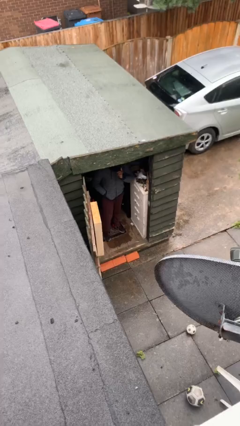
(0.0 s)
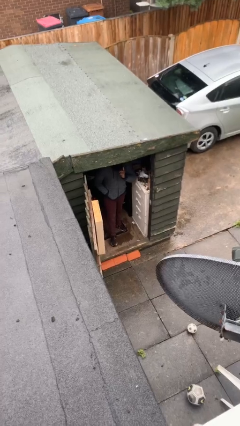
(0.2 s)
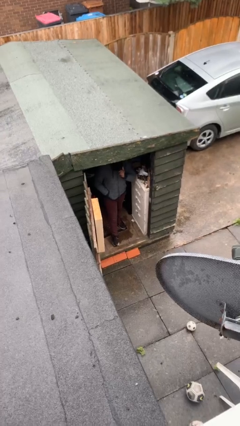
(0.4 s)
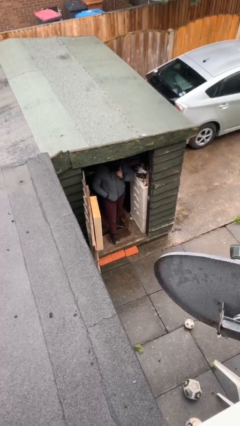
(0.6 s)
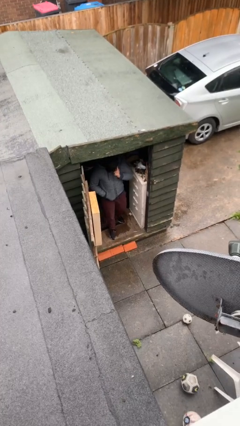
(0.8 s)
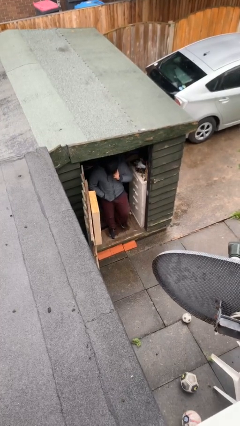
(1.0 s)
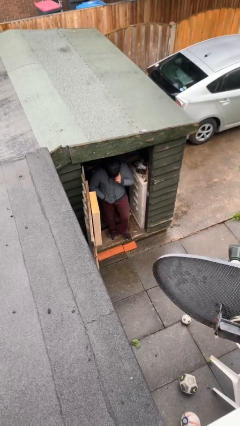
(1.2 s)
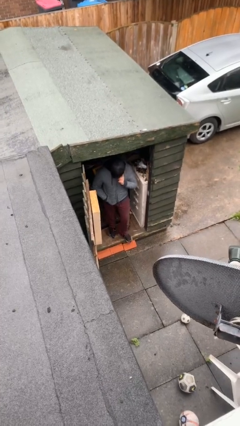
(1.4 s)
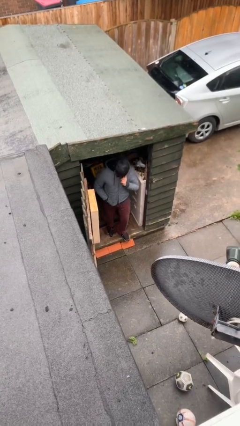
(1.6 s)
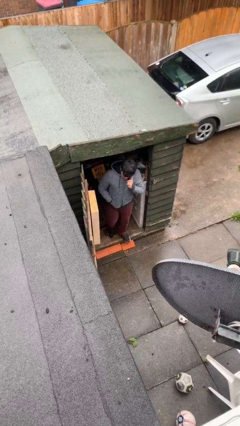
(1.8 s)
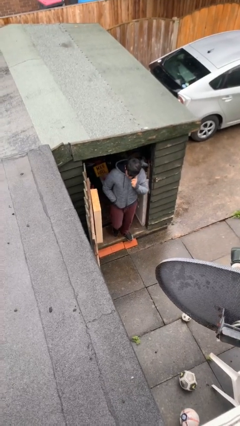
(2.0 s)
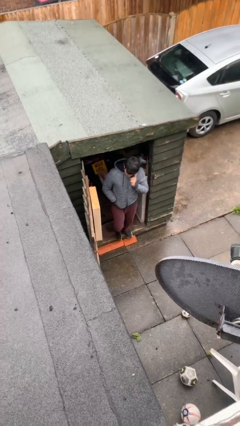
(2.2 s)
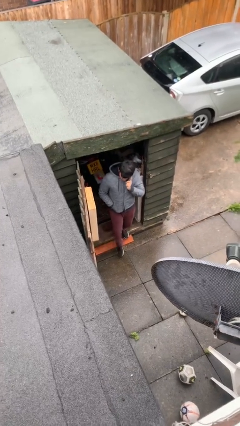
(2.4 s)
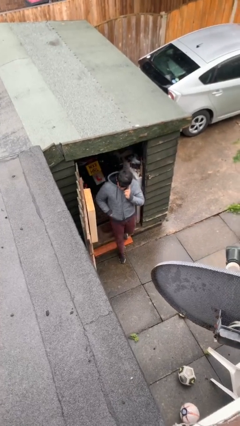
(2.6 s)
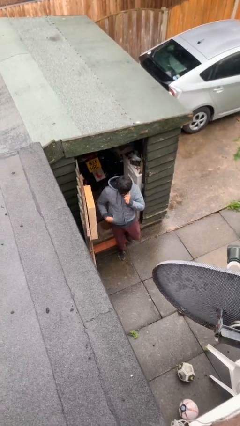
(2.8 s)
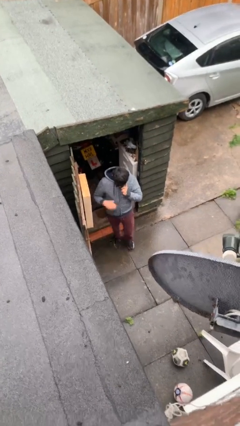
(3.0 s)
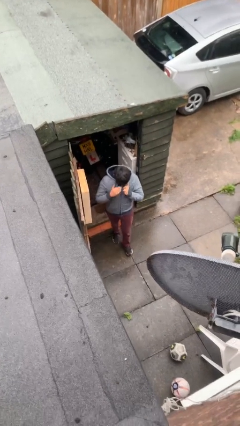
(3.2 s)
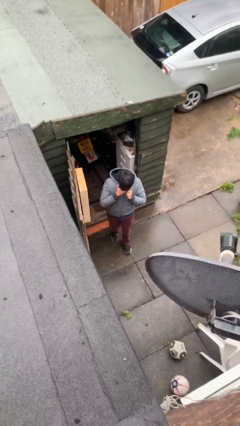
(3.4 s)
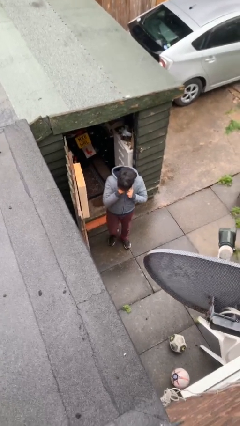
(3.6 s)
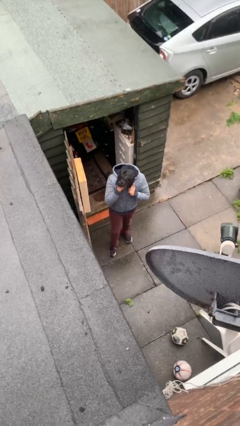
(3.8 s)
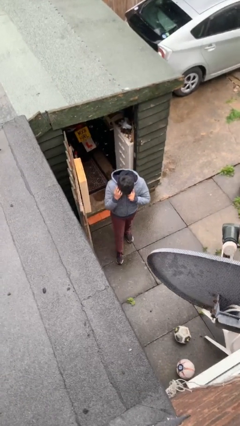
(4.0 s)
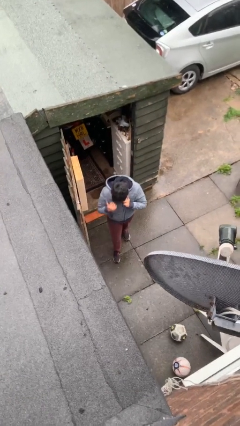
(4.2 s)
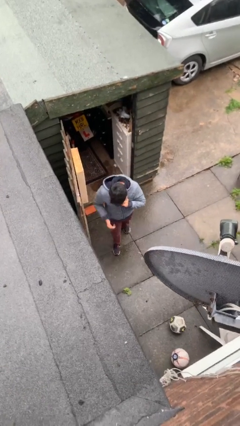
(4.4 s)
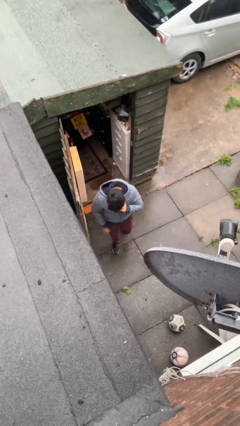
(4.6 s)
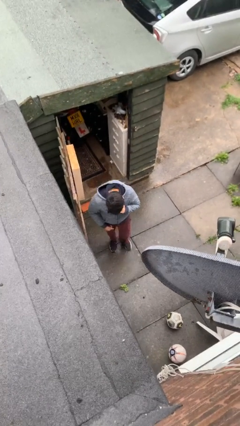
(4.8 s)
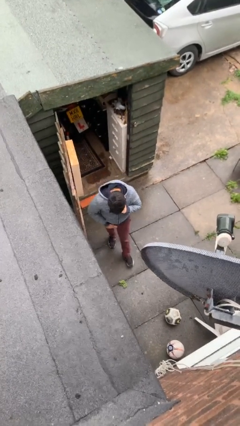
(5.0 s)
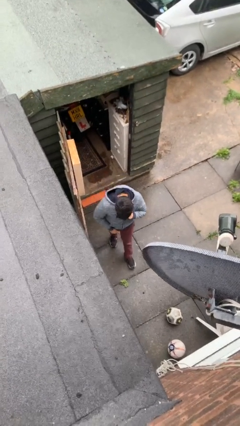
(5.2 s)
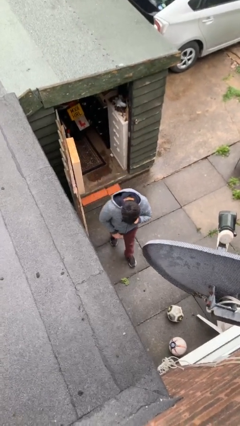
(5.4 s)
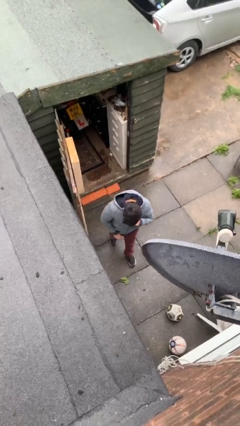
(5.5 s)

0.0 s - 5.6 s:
person enters scene through structure

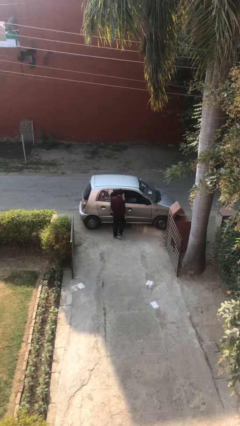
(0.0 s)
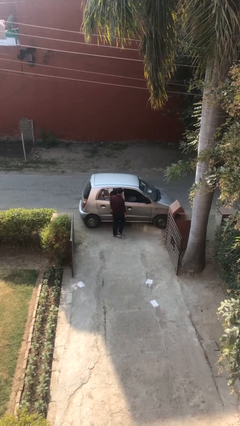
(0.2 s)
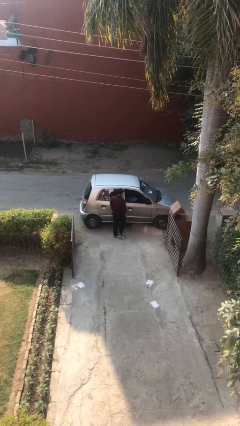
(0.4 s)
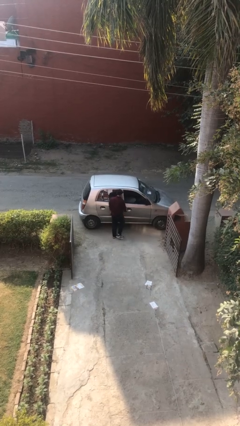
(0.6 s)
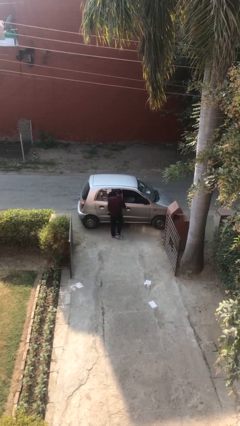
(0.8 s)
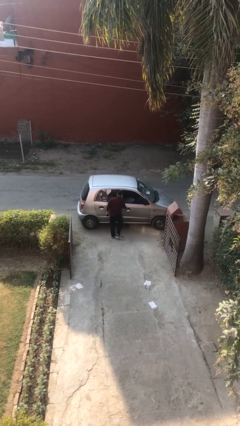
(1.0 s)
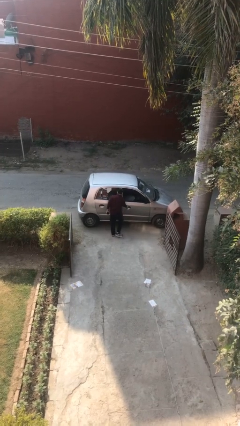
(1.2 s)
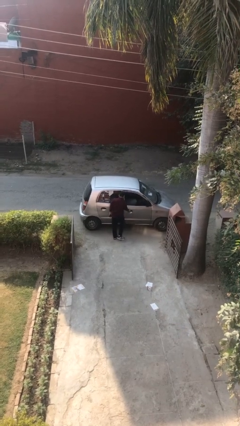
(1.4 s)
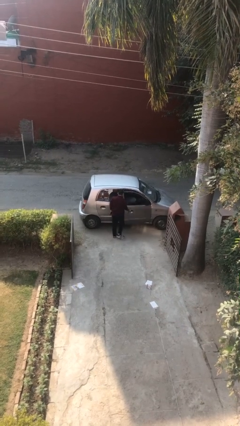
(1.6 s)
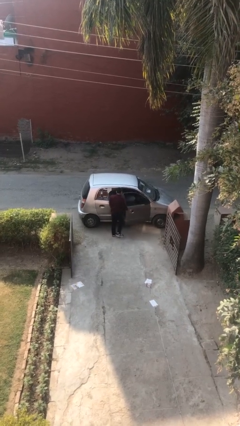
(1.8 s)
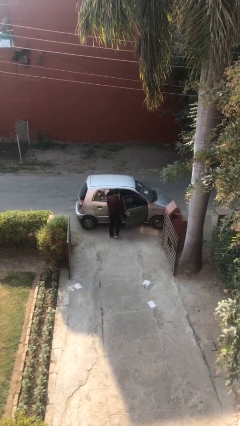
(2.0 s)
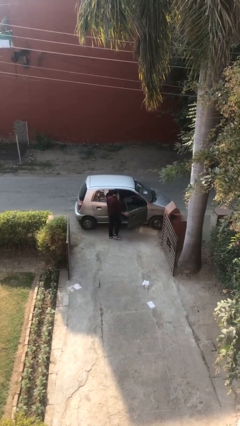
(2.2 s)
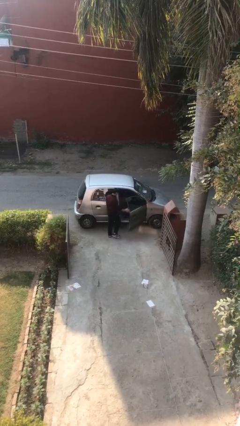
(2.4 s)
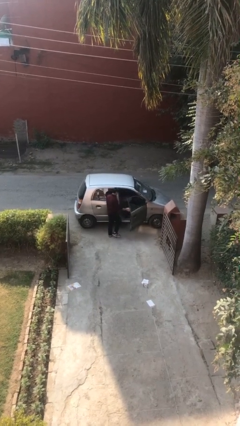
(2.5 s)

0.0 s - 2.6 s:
person opens car door

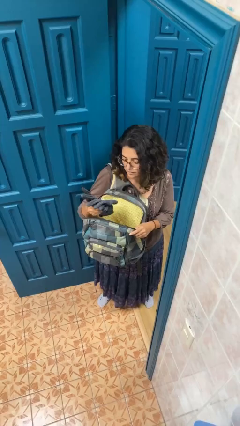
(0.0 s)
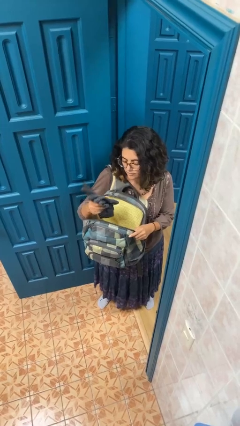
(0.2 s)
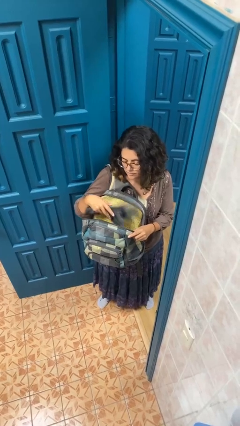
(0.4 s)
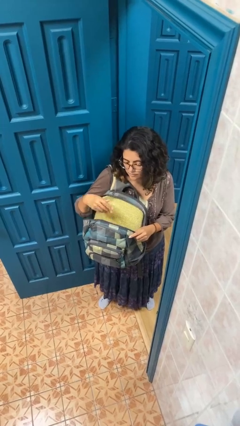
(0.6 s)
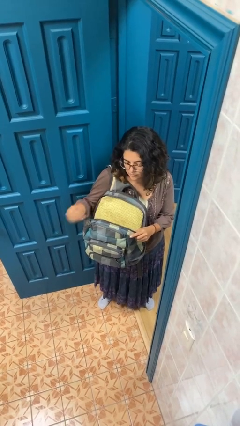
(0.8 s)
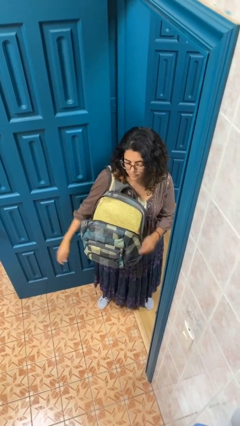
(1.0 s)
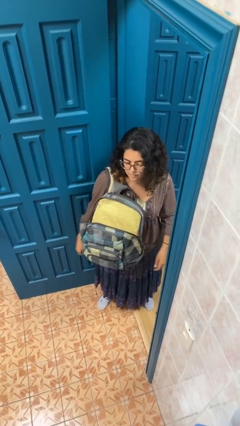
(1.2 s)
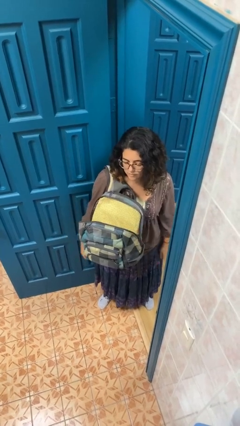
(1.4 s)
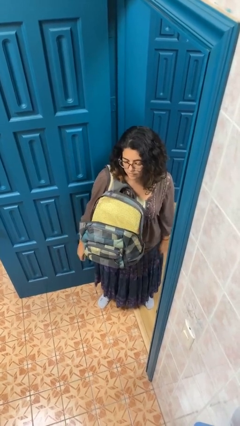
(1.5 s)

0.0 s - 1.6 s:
person puts object into backpack

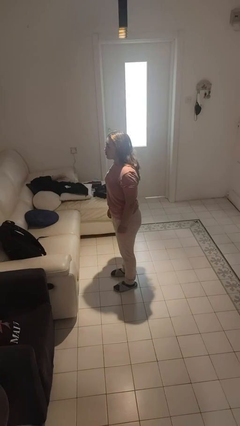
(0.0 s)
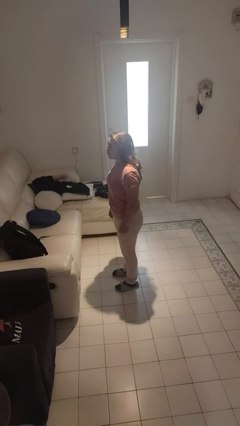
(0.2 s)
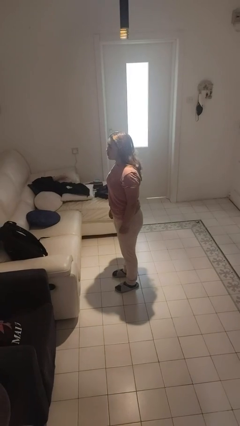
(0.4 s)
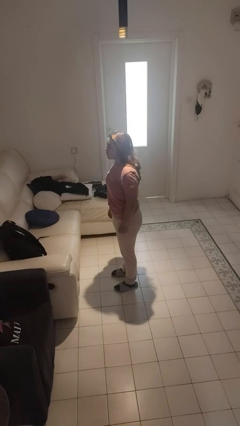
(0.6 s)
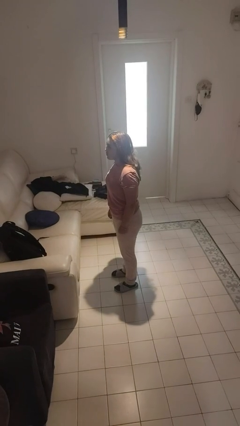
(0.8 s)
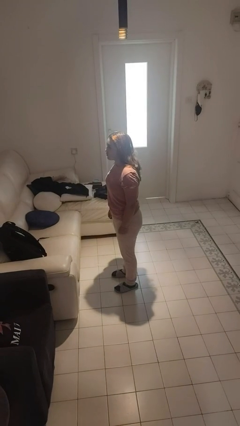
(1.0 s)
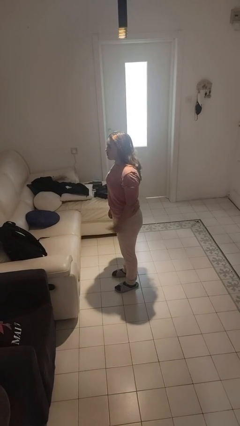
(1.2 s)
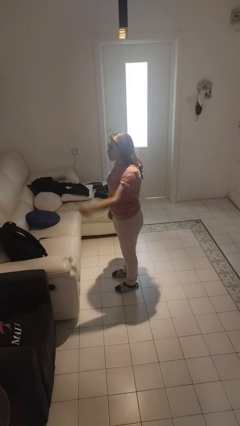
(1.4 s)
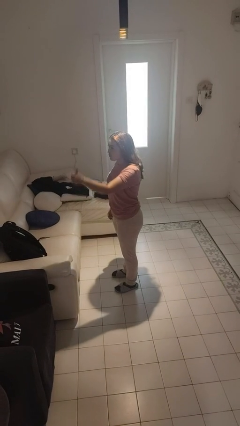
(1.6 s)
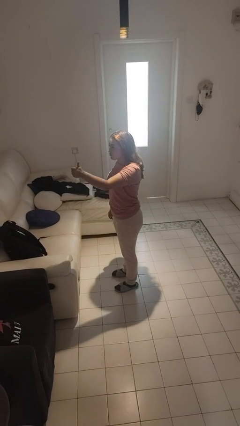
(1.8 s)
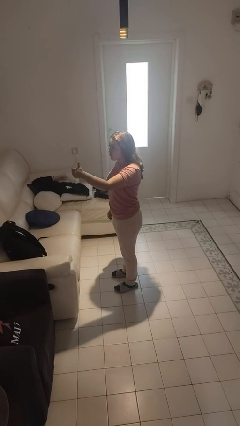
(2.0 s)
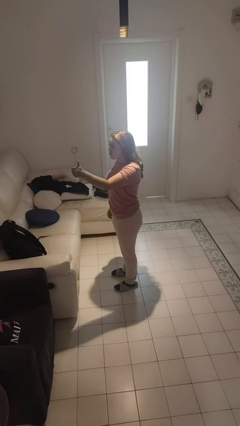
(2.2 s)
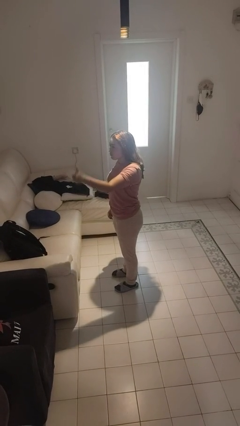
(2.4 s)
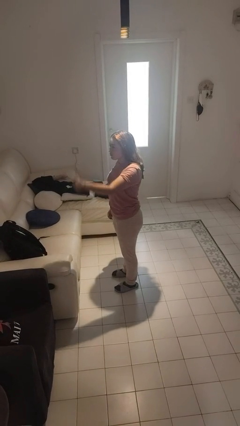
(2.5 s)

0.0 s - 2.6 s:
person gestures thumbs up

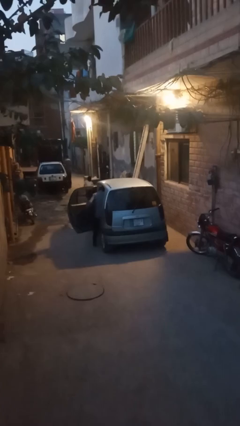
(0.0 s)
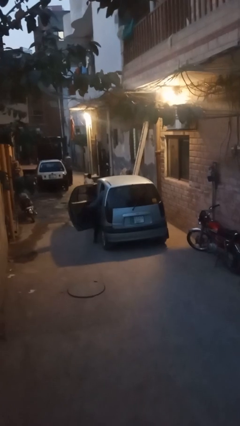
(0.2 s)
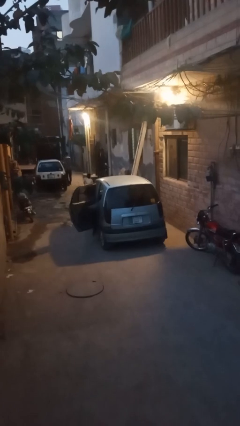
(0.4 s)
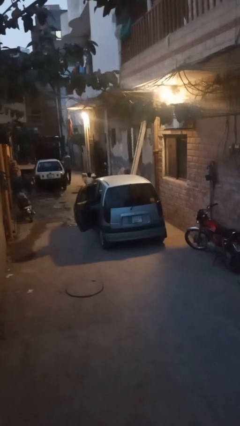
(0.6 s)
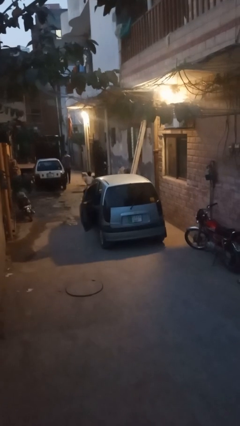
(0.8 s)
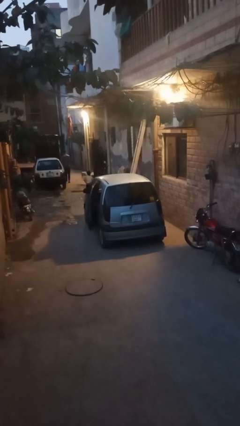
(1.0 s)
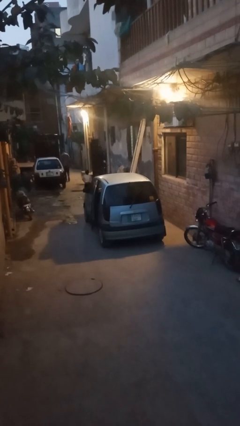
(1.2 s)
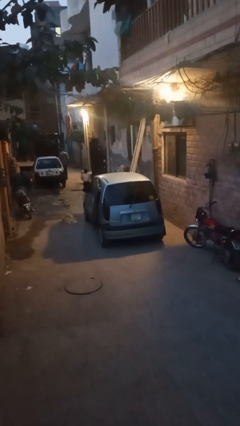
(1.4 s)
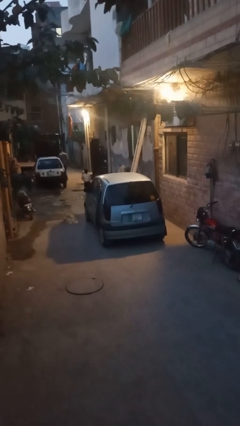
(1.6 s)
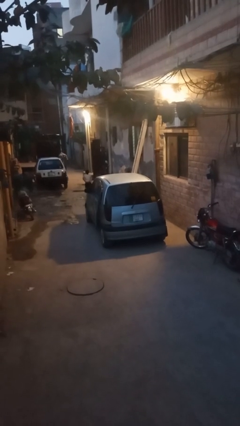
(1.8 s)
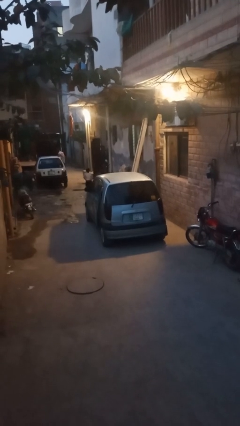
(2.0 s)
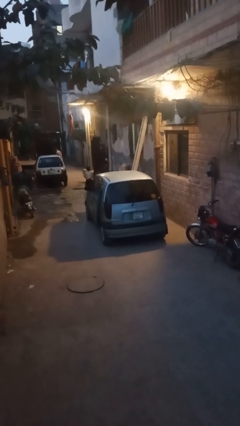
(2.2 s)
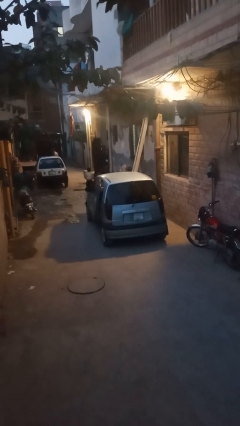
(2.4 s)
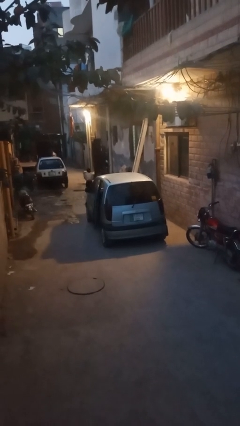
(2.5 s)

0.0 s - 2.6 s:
car picks up person

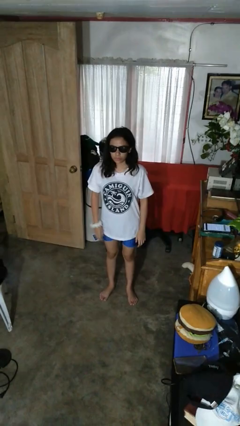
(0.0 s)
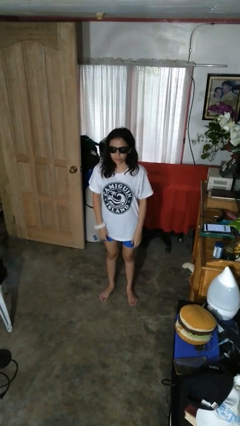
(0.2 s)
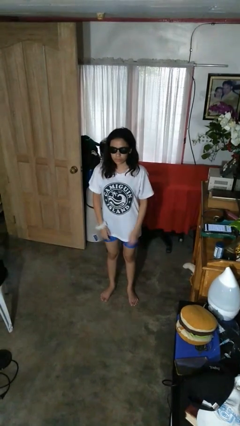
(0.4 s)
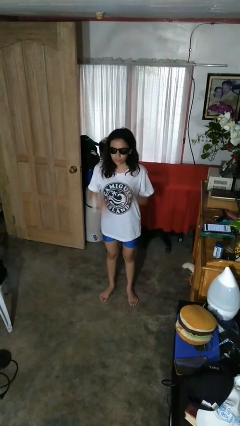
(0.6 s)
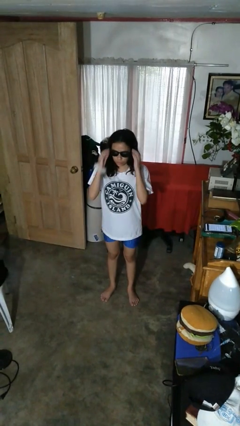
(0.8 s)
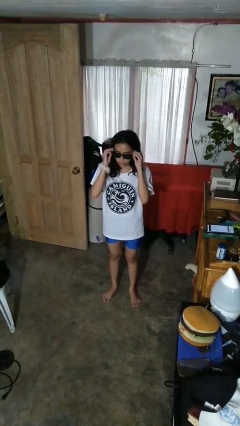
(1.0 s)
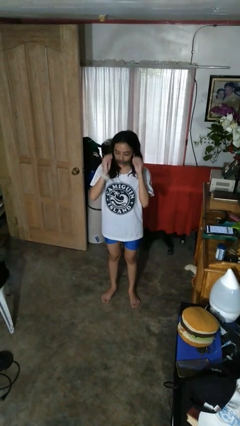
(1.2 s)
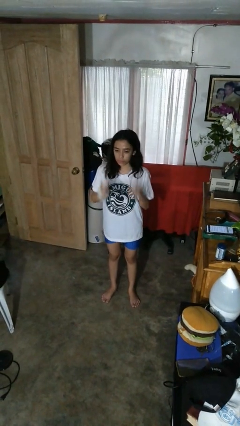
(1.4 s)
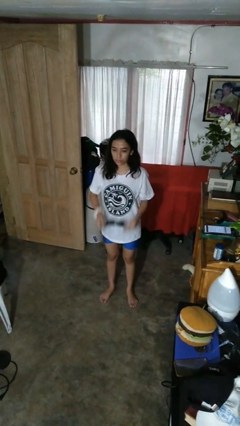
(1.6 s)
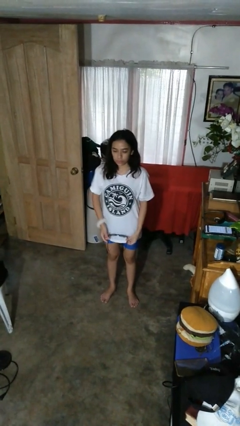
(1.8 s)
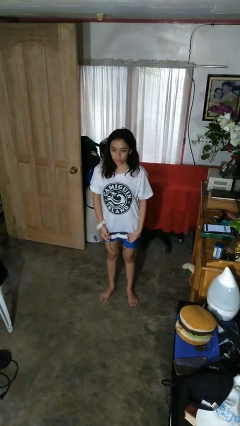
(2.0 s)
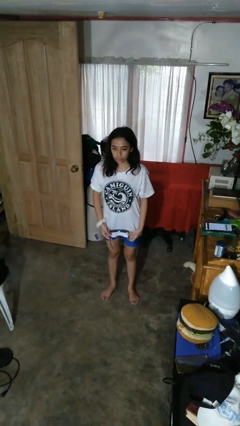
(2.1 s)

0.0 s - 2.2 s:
person takes off sunglasses
